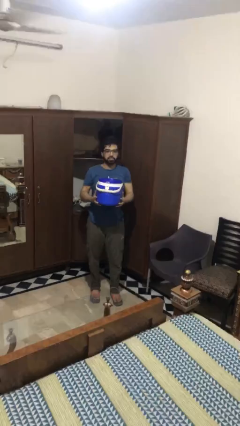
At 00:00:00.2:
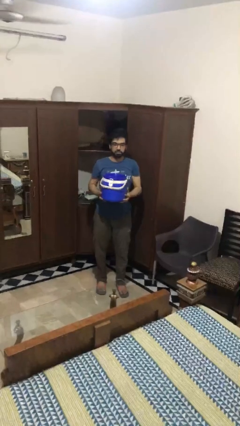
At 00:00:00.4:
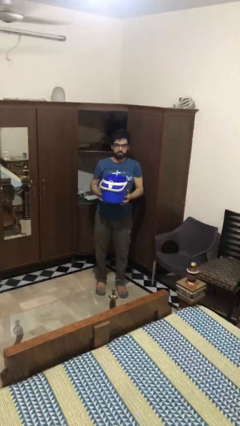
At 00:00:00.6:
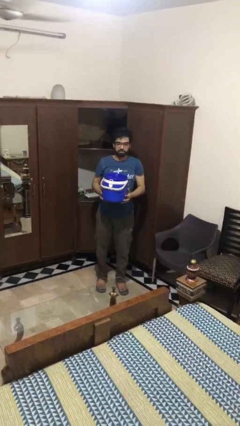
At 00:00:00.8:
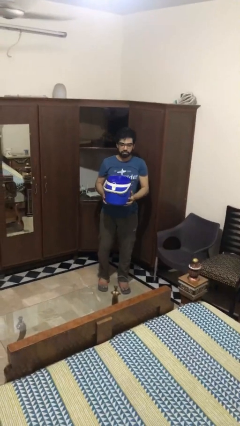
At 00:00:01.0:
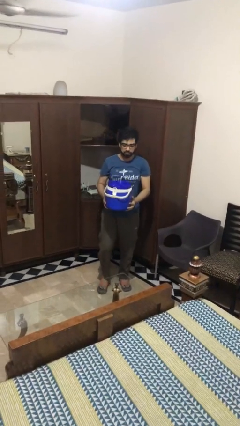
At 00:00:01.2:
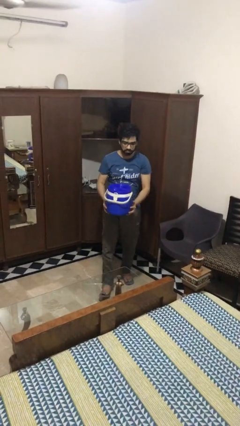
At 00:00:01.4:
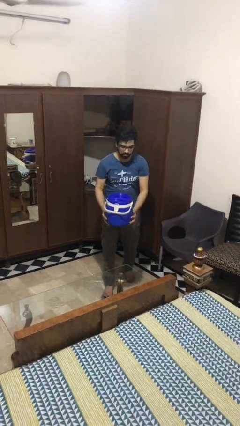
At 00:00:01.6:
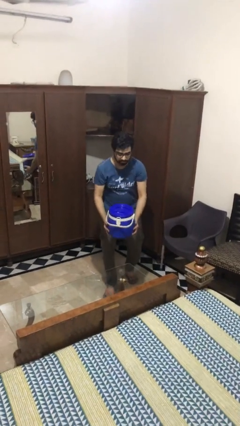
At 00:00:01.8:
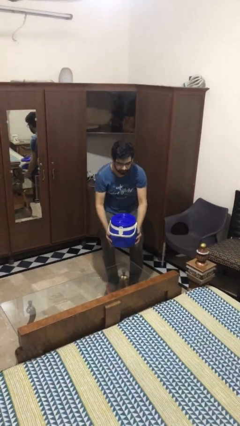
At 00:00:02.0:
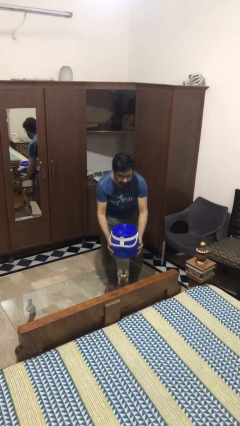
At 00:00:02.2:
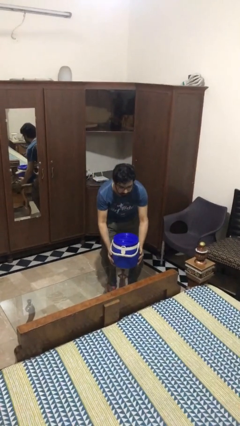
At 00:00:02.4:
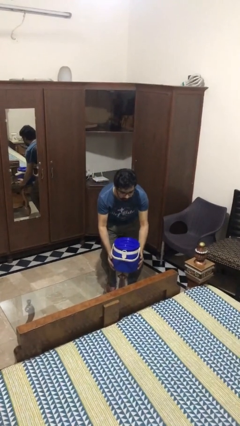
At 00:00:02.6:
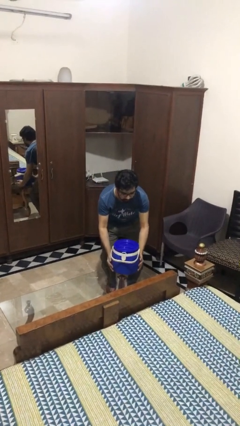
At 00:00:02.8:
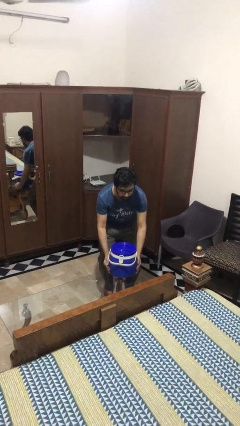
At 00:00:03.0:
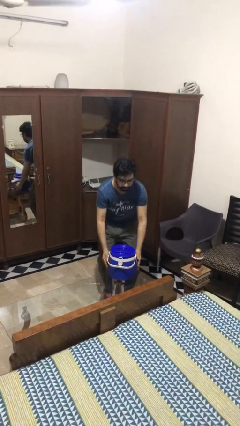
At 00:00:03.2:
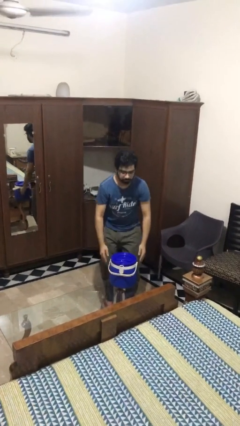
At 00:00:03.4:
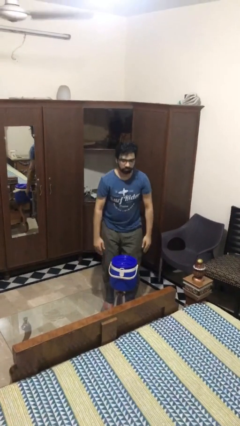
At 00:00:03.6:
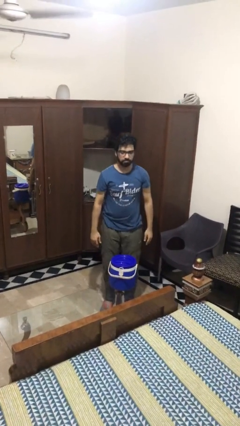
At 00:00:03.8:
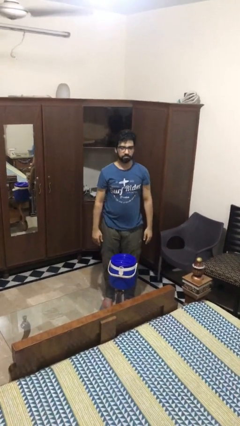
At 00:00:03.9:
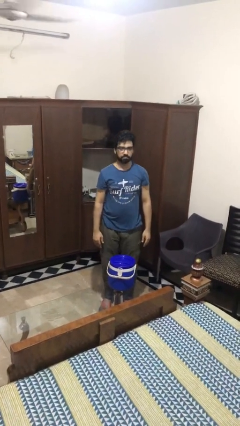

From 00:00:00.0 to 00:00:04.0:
person puts down object on table

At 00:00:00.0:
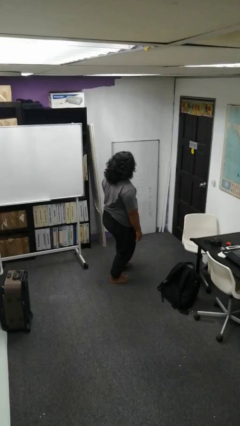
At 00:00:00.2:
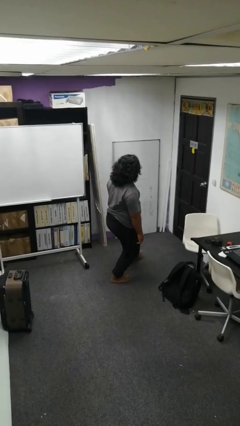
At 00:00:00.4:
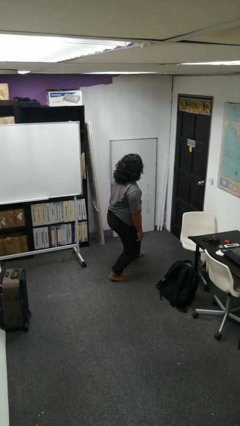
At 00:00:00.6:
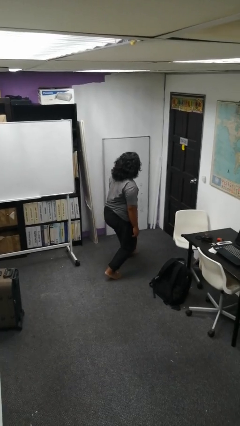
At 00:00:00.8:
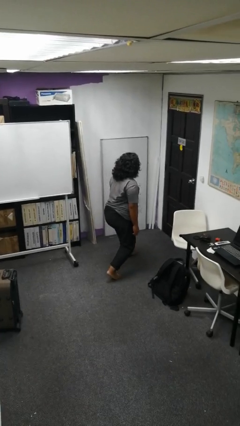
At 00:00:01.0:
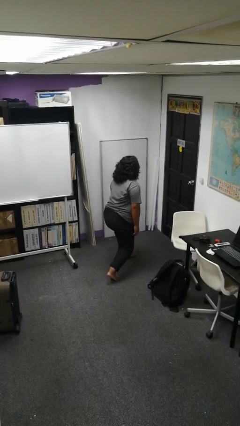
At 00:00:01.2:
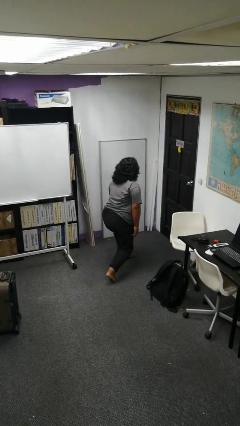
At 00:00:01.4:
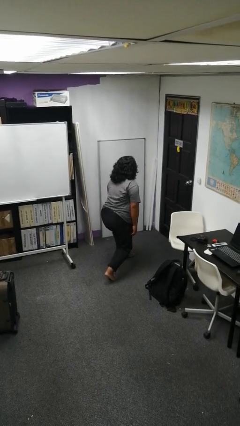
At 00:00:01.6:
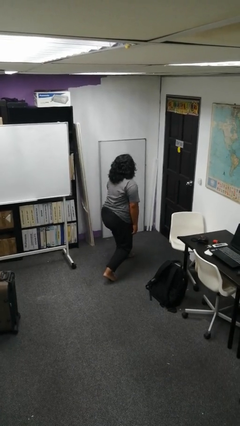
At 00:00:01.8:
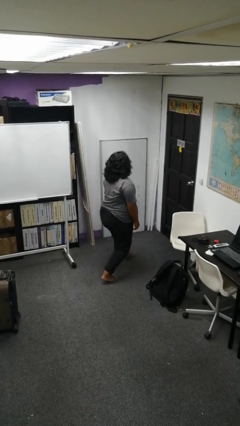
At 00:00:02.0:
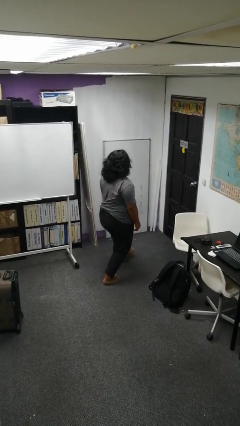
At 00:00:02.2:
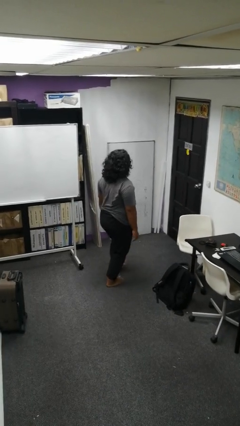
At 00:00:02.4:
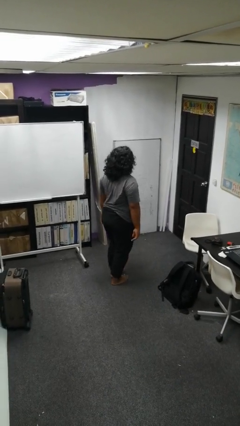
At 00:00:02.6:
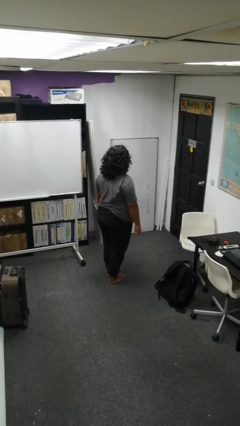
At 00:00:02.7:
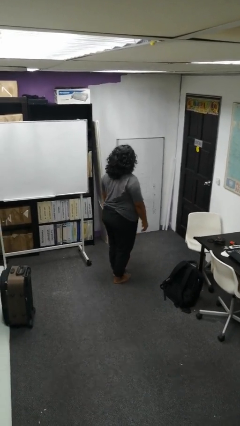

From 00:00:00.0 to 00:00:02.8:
person exercises with lunges

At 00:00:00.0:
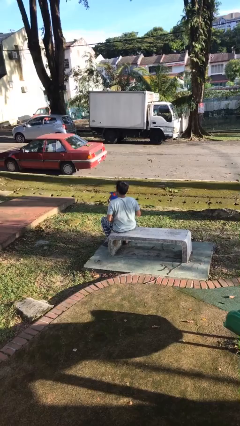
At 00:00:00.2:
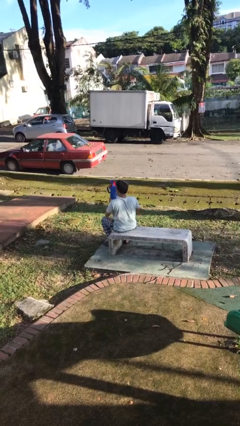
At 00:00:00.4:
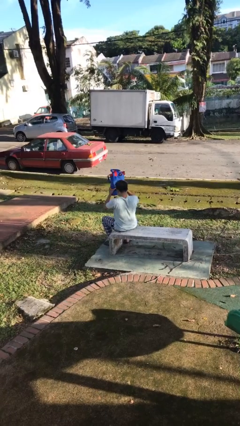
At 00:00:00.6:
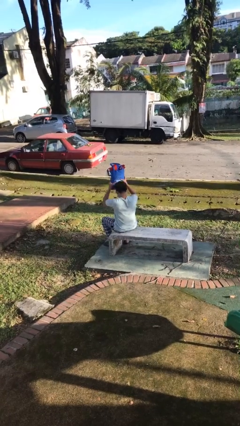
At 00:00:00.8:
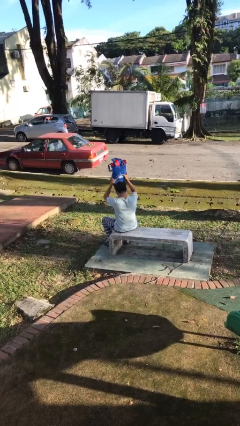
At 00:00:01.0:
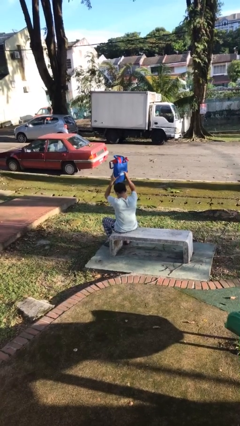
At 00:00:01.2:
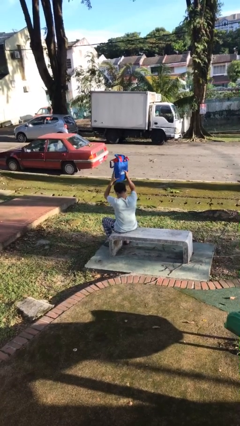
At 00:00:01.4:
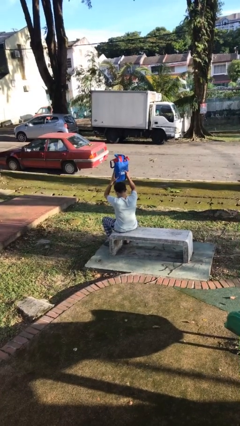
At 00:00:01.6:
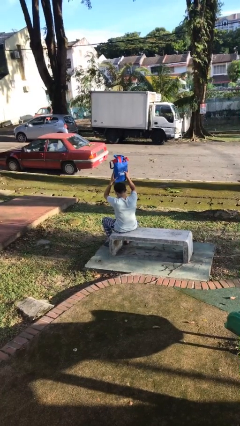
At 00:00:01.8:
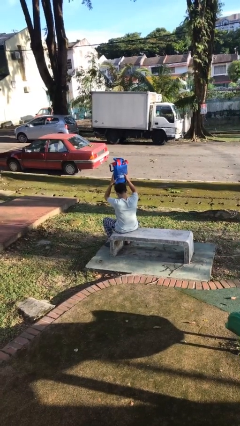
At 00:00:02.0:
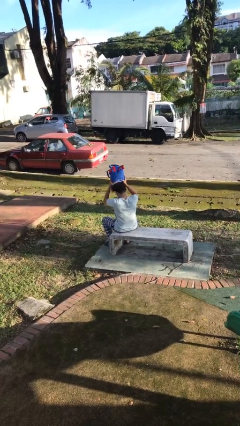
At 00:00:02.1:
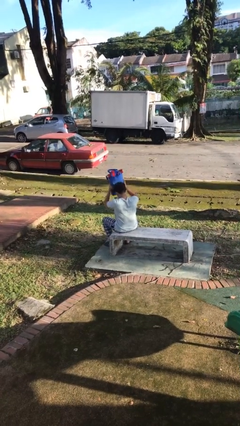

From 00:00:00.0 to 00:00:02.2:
person holds object above head

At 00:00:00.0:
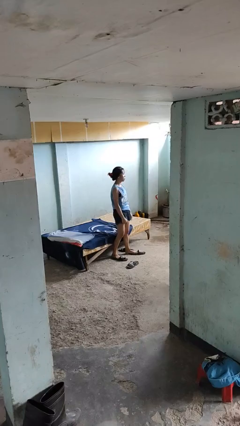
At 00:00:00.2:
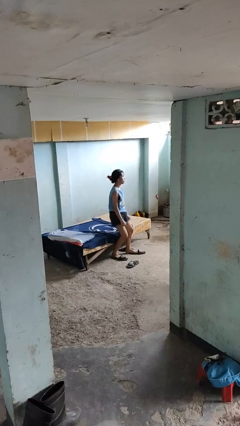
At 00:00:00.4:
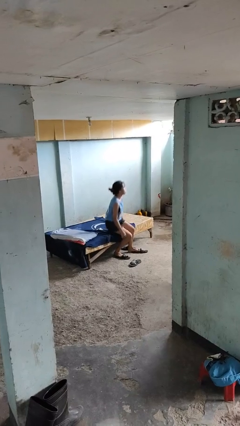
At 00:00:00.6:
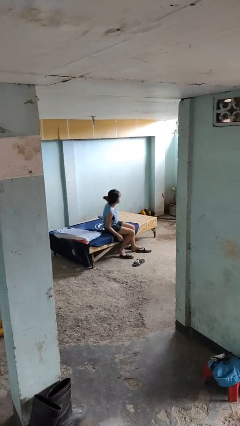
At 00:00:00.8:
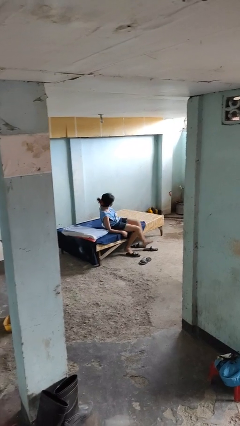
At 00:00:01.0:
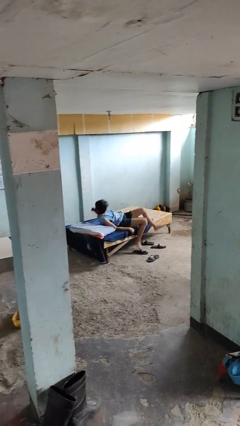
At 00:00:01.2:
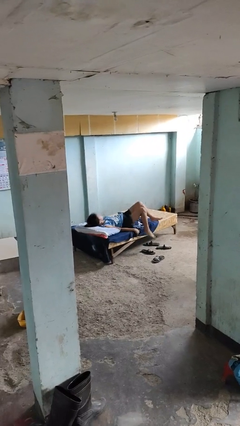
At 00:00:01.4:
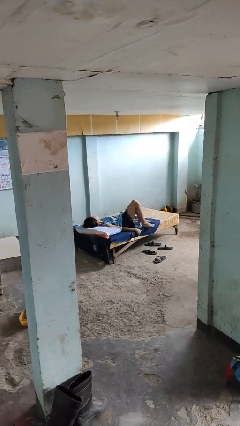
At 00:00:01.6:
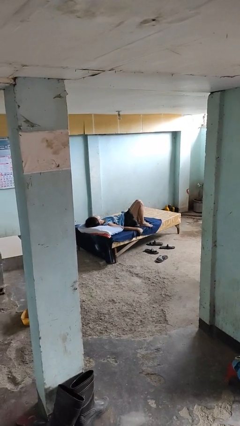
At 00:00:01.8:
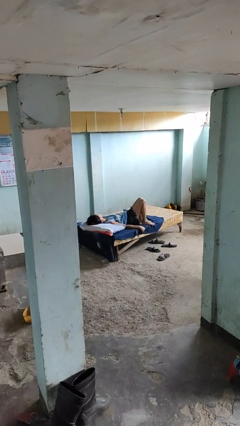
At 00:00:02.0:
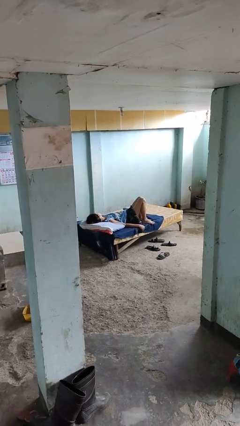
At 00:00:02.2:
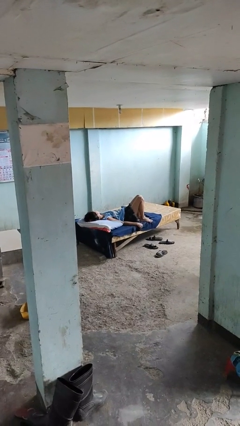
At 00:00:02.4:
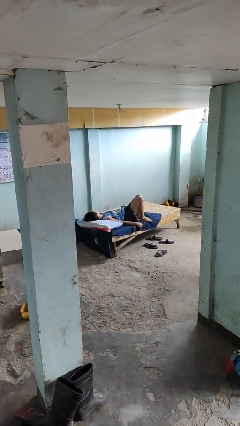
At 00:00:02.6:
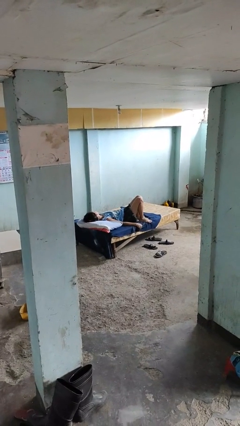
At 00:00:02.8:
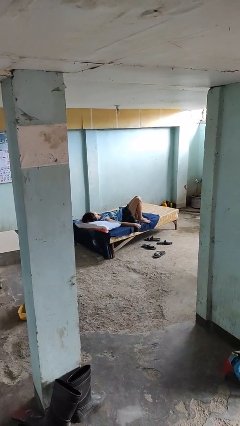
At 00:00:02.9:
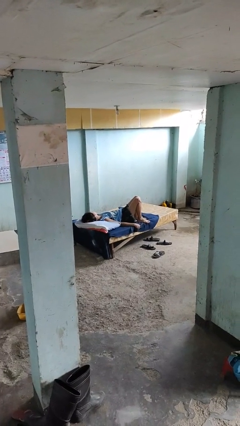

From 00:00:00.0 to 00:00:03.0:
person lies down on bed

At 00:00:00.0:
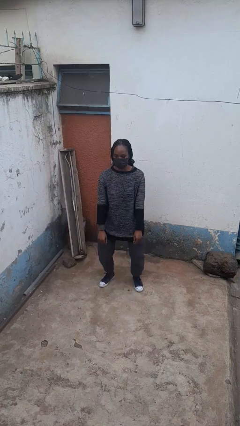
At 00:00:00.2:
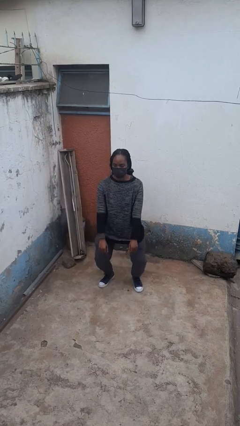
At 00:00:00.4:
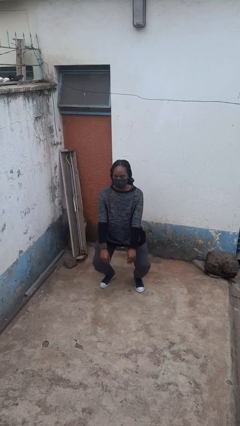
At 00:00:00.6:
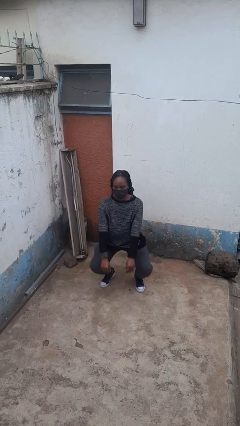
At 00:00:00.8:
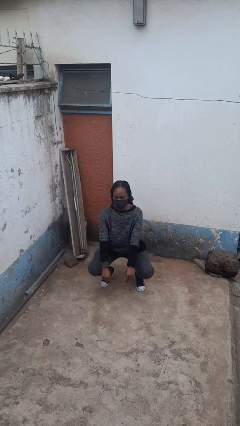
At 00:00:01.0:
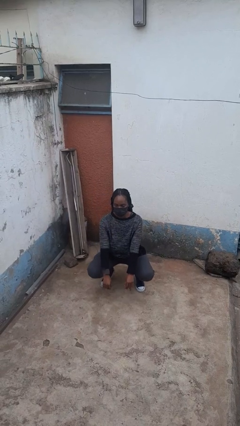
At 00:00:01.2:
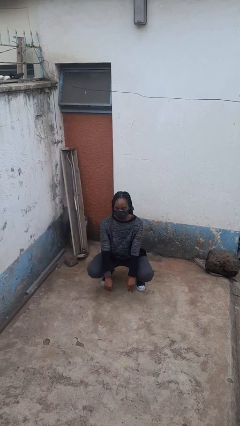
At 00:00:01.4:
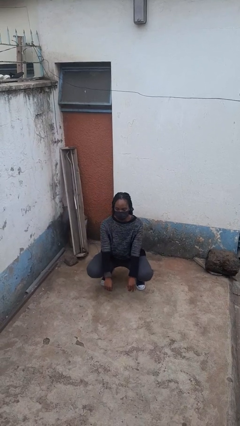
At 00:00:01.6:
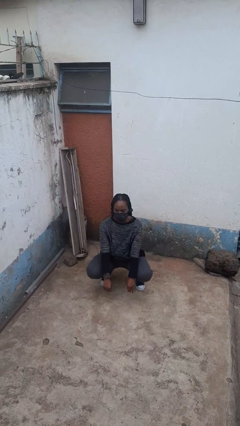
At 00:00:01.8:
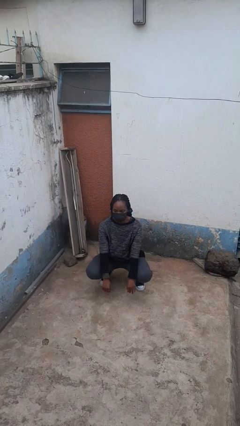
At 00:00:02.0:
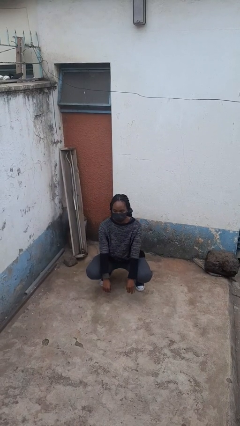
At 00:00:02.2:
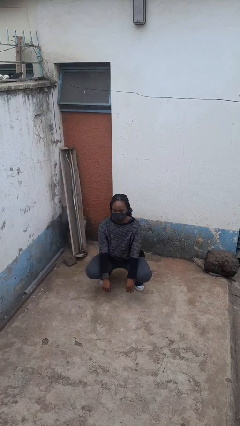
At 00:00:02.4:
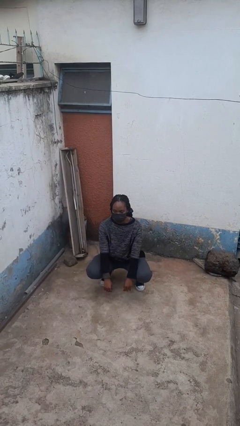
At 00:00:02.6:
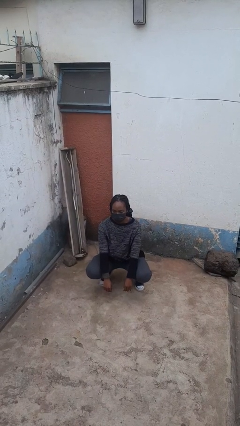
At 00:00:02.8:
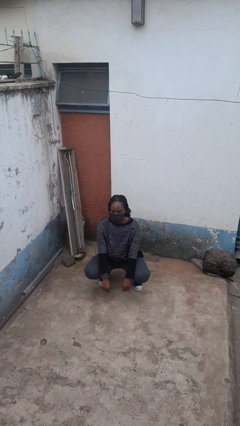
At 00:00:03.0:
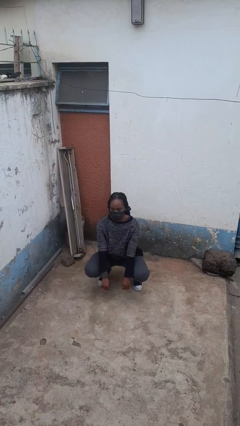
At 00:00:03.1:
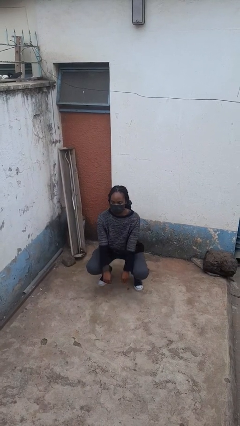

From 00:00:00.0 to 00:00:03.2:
person squats

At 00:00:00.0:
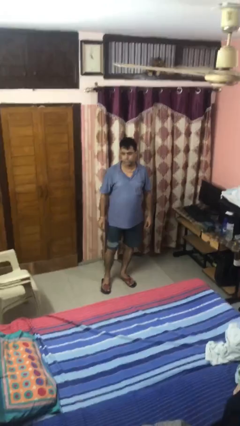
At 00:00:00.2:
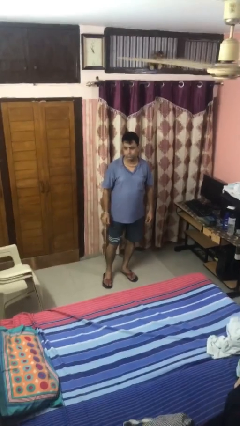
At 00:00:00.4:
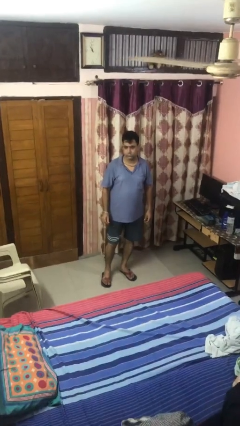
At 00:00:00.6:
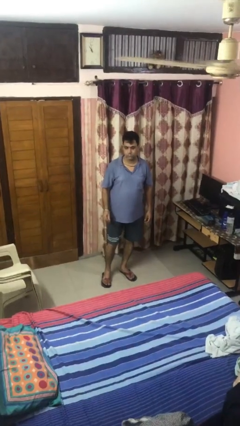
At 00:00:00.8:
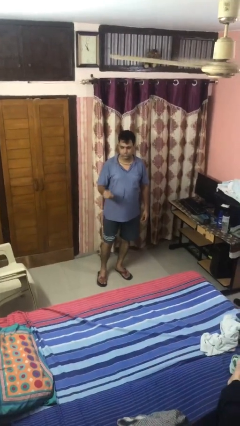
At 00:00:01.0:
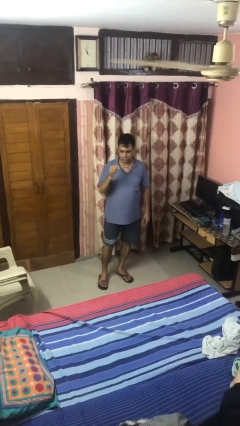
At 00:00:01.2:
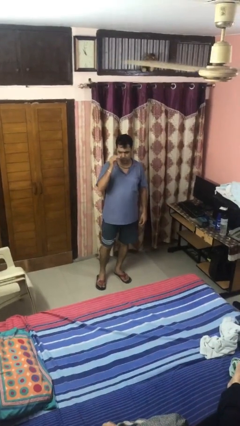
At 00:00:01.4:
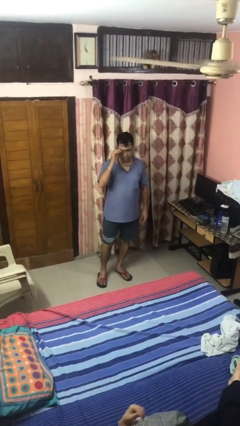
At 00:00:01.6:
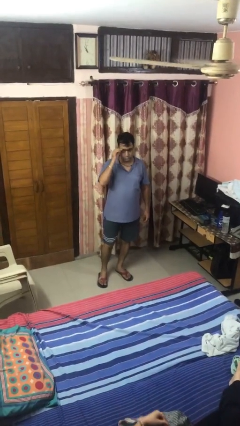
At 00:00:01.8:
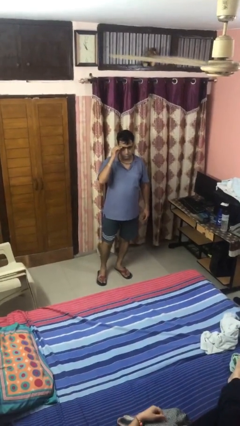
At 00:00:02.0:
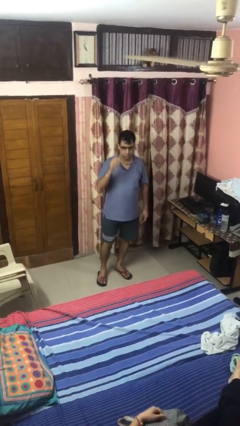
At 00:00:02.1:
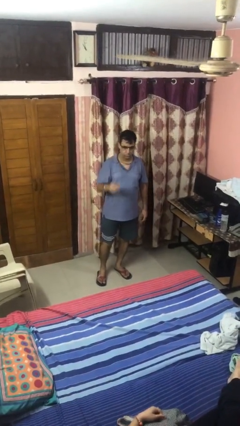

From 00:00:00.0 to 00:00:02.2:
person puts on glasses
